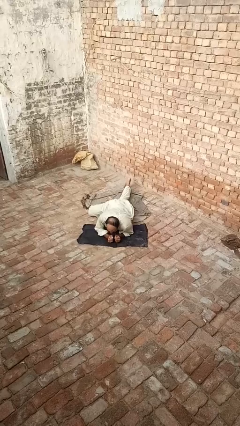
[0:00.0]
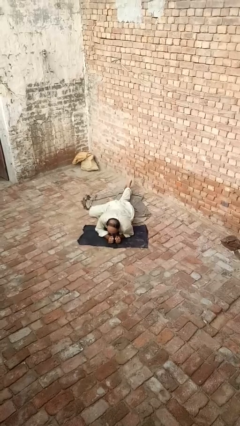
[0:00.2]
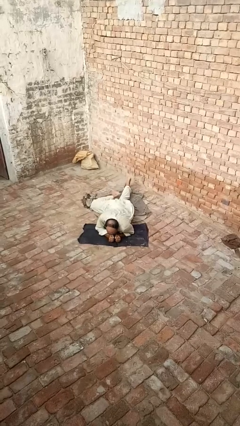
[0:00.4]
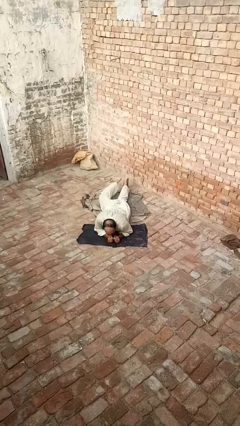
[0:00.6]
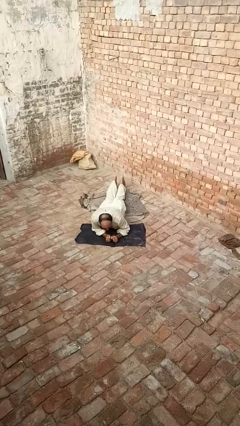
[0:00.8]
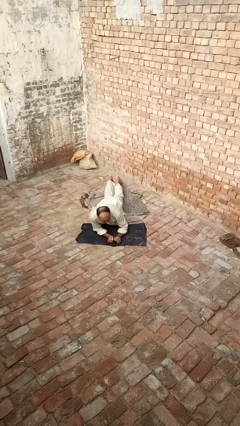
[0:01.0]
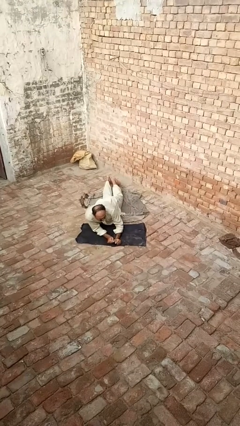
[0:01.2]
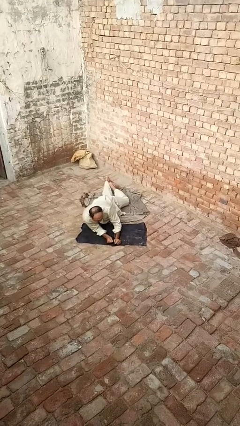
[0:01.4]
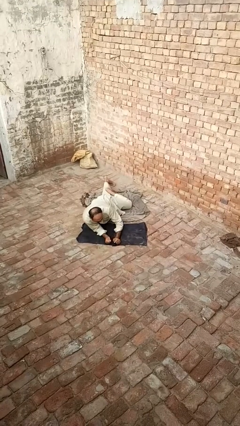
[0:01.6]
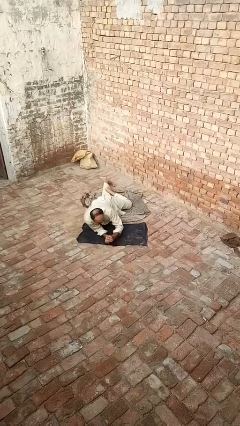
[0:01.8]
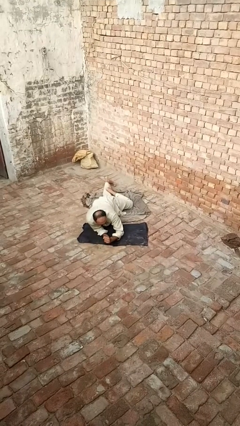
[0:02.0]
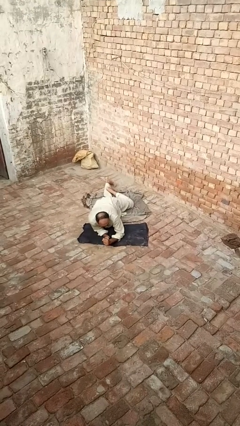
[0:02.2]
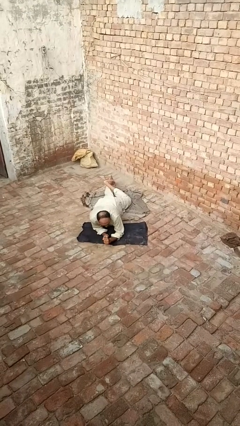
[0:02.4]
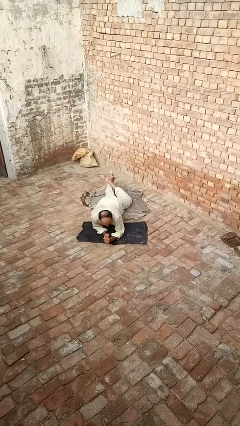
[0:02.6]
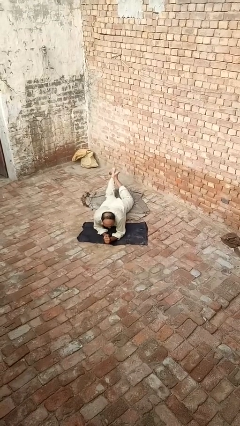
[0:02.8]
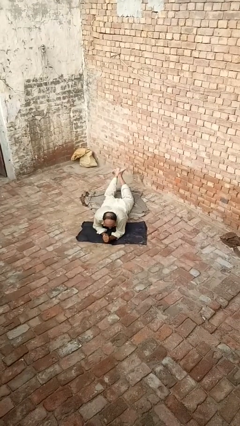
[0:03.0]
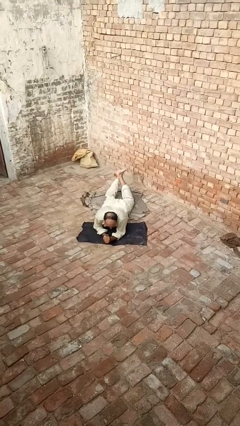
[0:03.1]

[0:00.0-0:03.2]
person crawls

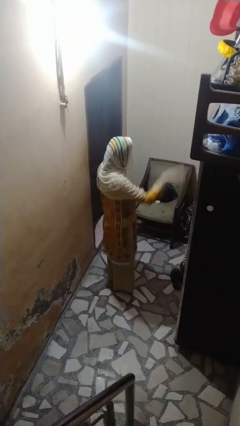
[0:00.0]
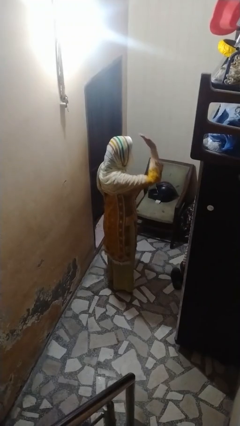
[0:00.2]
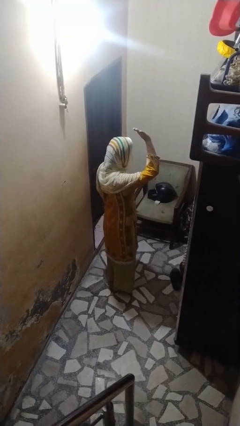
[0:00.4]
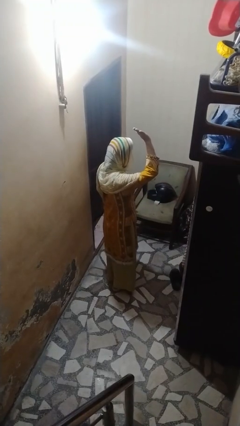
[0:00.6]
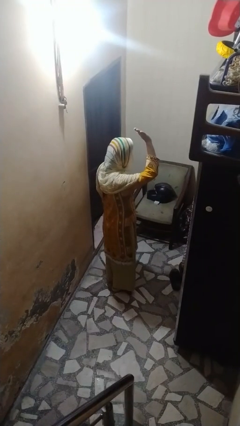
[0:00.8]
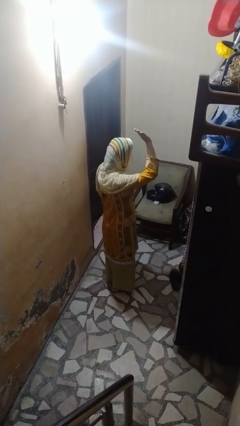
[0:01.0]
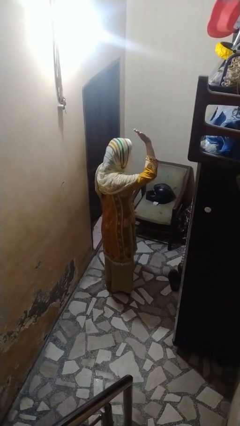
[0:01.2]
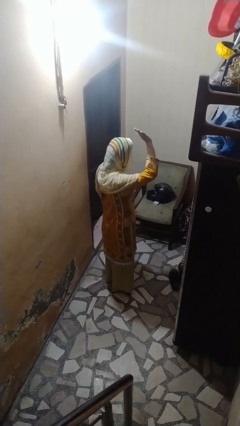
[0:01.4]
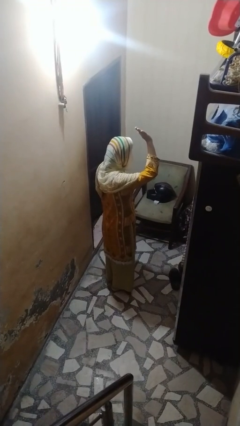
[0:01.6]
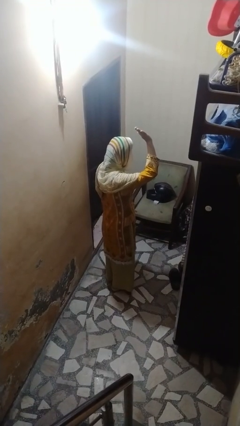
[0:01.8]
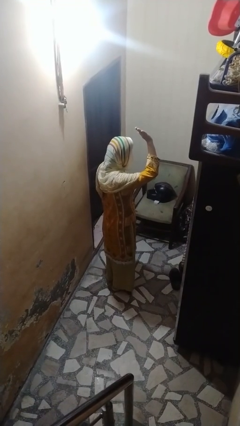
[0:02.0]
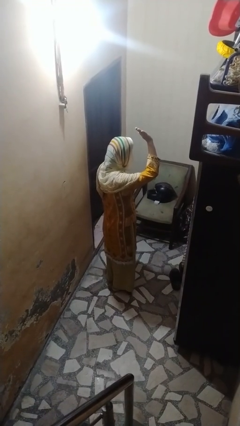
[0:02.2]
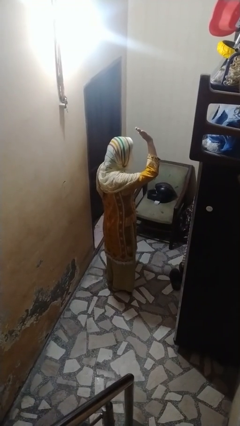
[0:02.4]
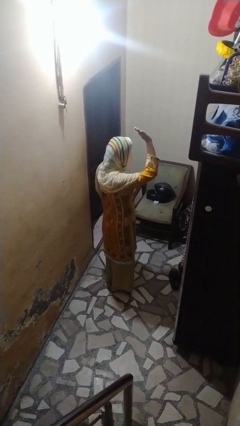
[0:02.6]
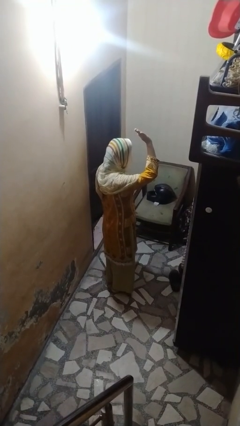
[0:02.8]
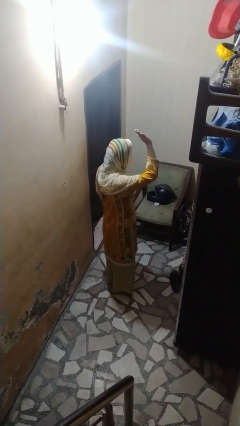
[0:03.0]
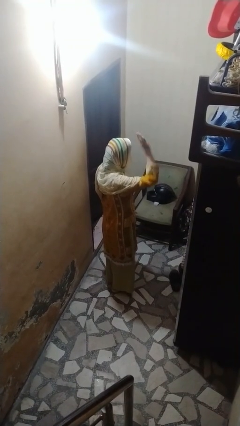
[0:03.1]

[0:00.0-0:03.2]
person gestures raise hand

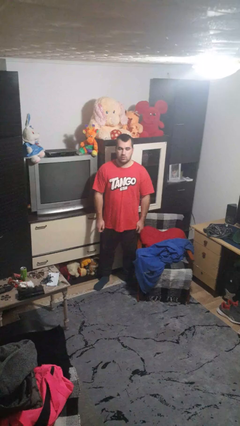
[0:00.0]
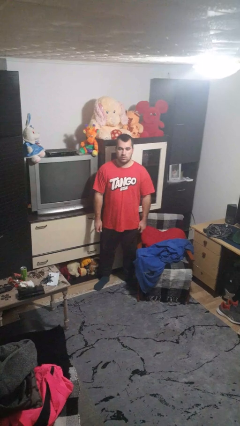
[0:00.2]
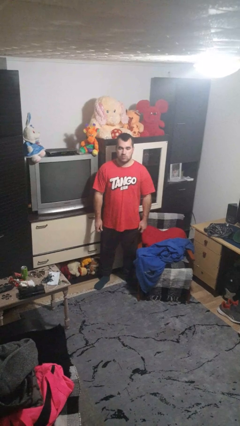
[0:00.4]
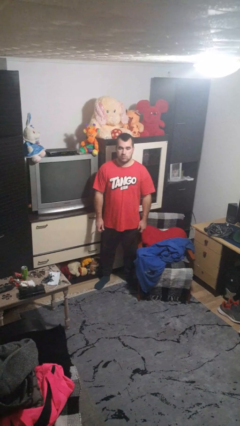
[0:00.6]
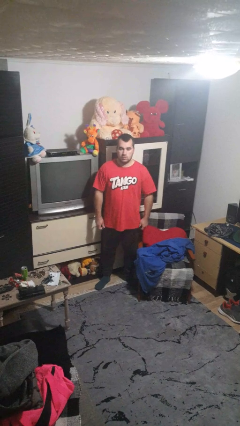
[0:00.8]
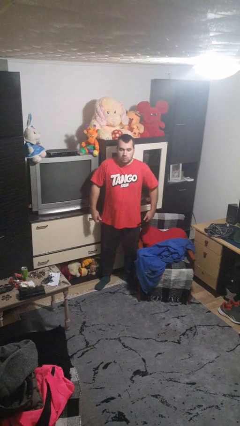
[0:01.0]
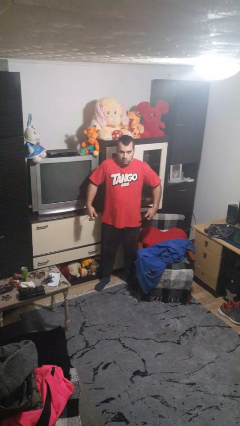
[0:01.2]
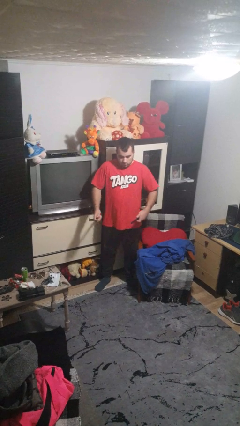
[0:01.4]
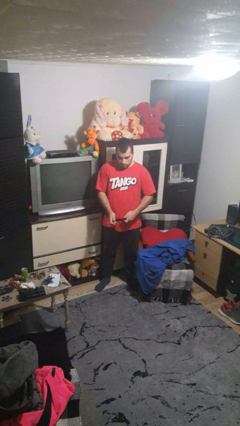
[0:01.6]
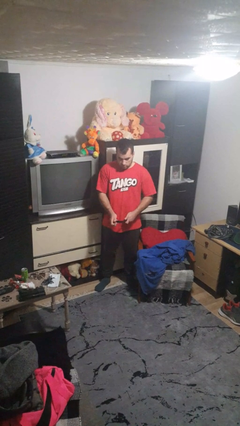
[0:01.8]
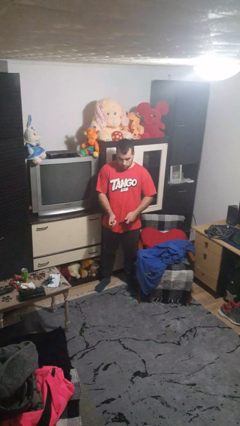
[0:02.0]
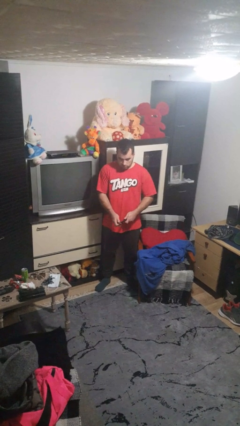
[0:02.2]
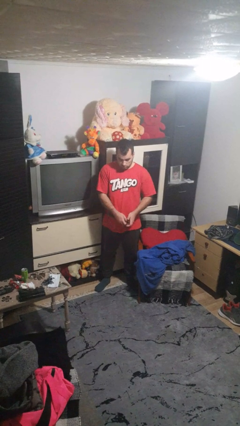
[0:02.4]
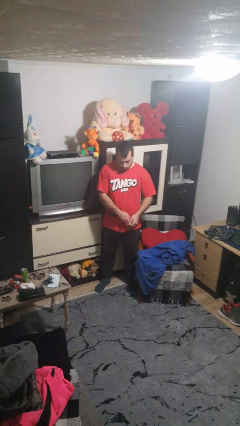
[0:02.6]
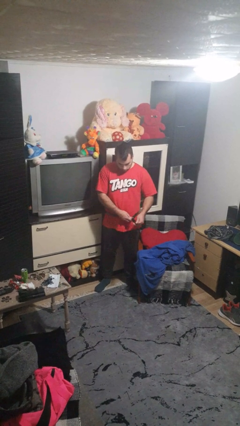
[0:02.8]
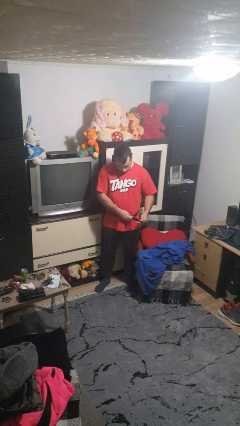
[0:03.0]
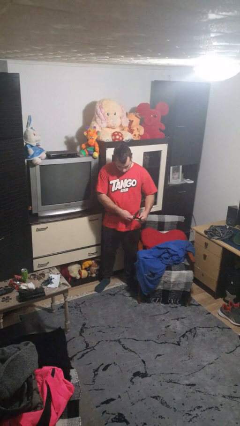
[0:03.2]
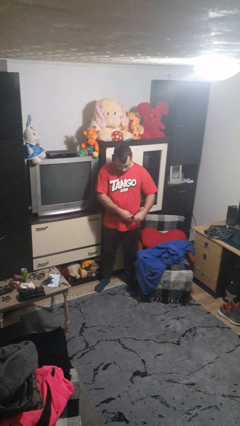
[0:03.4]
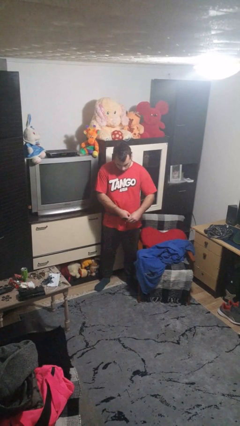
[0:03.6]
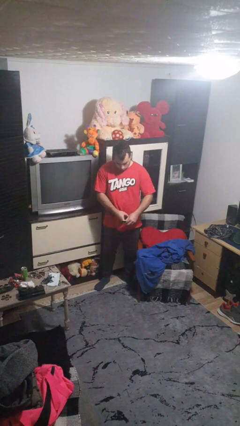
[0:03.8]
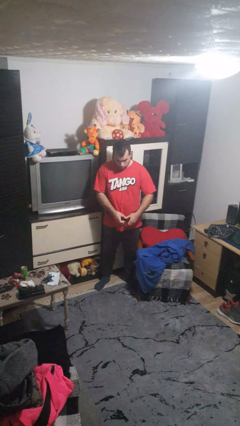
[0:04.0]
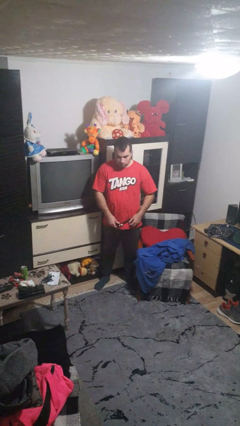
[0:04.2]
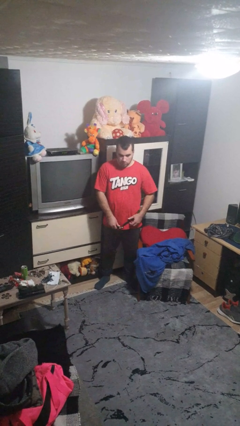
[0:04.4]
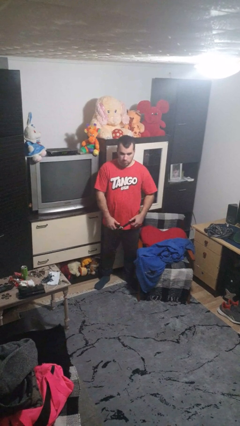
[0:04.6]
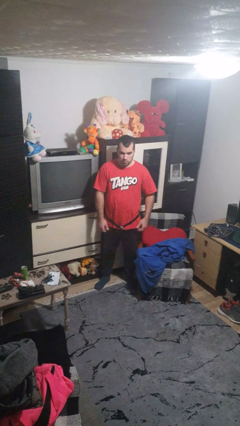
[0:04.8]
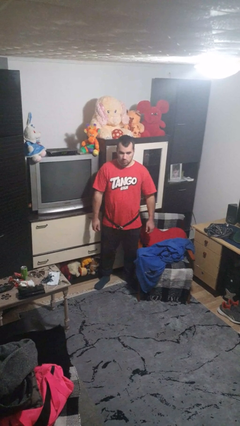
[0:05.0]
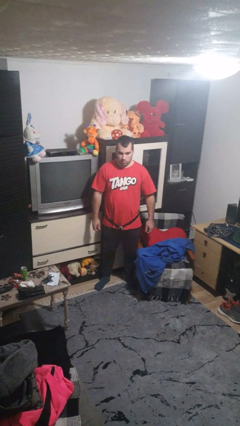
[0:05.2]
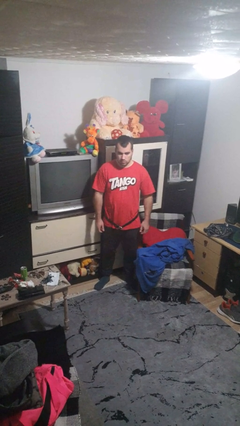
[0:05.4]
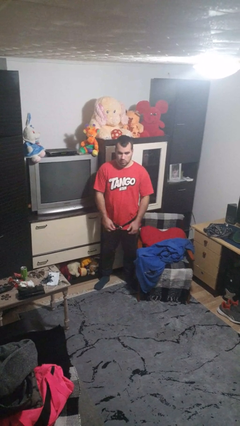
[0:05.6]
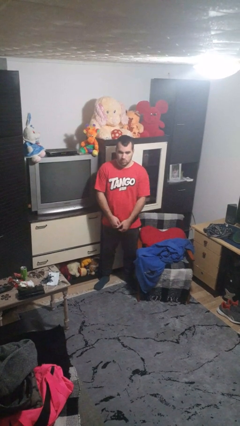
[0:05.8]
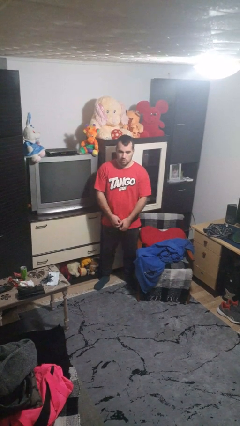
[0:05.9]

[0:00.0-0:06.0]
person puts on belt

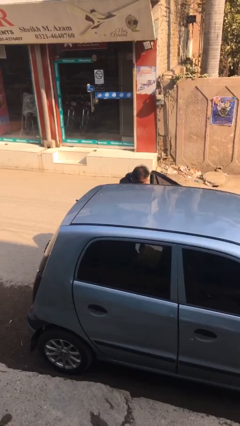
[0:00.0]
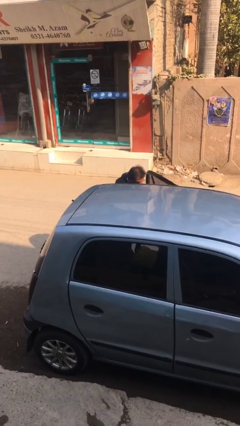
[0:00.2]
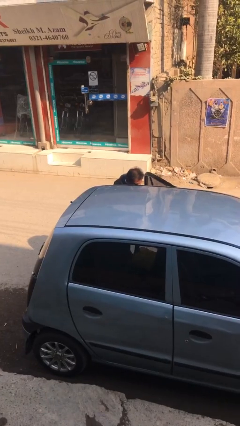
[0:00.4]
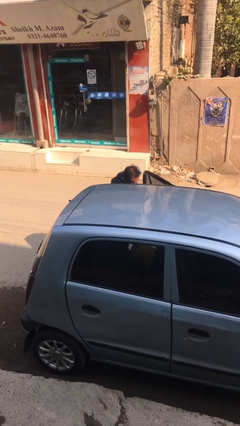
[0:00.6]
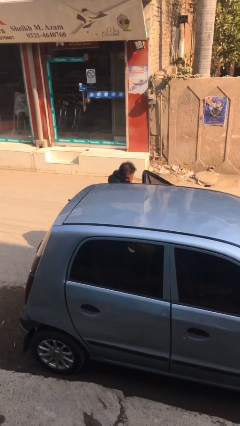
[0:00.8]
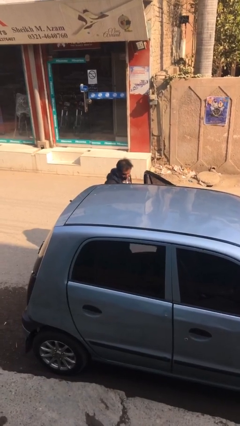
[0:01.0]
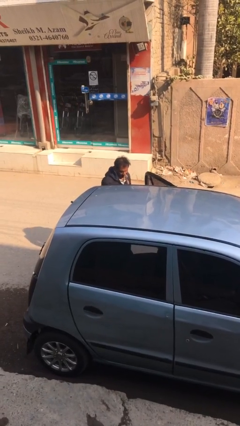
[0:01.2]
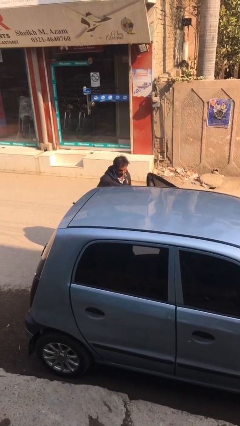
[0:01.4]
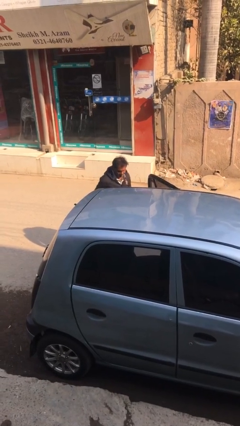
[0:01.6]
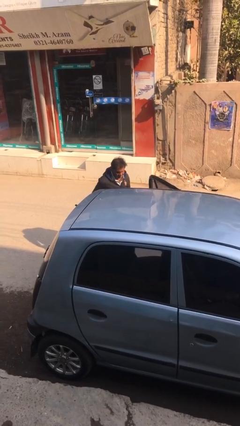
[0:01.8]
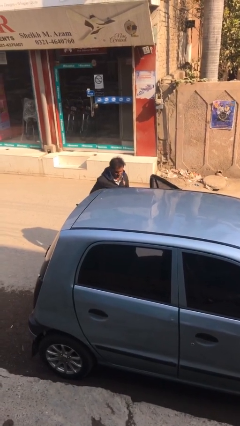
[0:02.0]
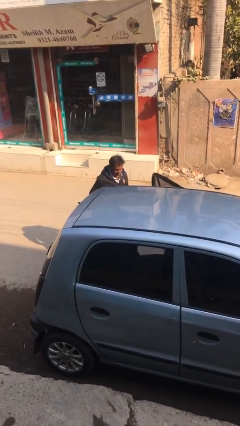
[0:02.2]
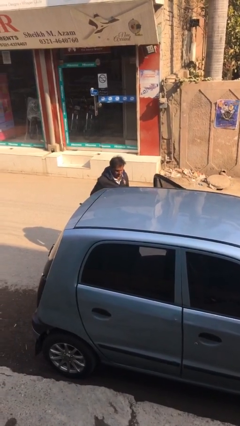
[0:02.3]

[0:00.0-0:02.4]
person unloads car

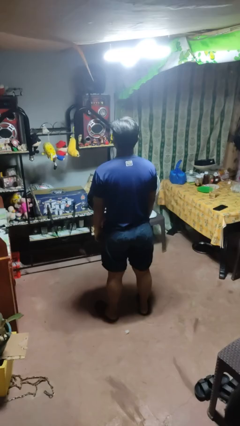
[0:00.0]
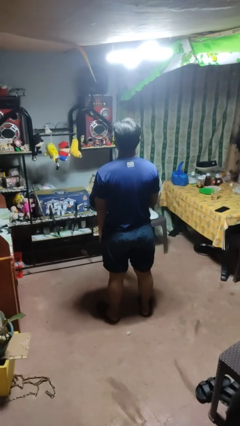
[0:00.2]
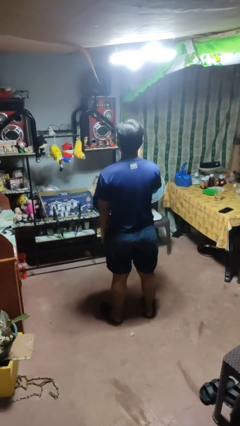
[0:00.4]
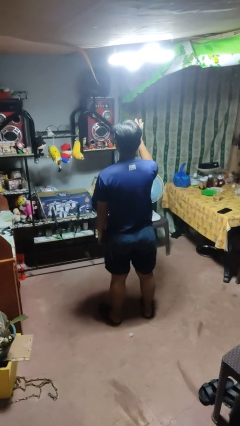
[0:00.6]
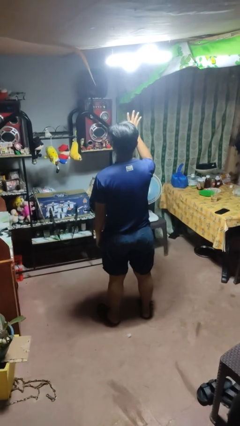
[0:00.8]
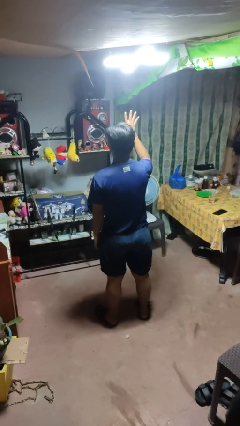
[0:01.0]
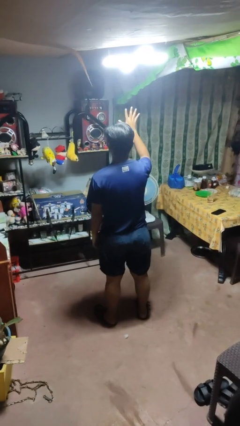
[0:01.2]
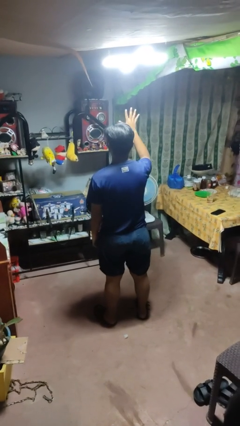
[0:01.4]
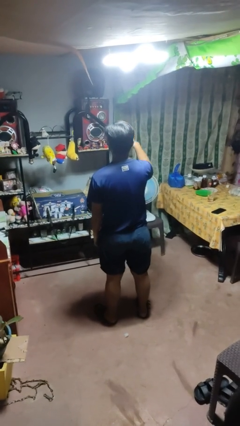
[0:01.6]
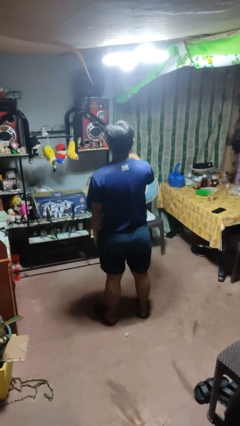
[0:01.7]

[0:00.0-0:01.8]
person gestures number five

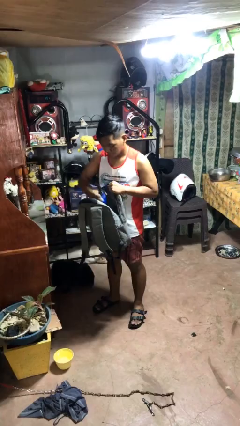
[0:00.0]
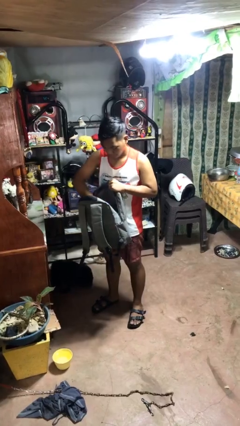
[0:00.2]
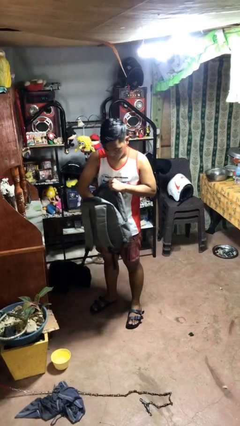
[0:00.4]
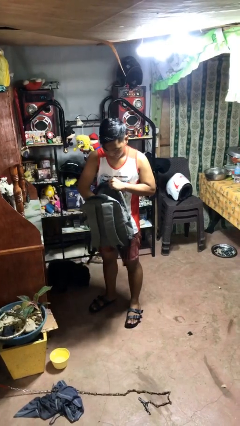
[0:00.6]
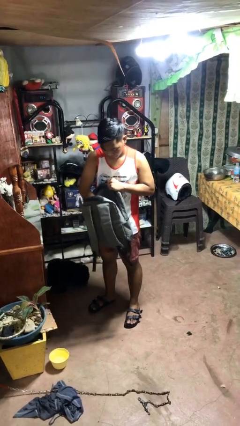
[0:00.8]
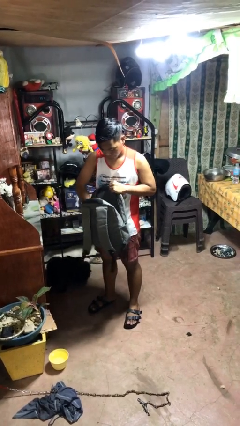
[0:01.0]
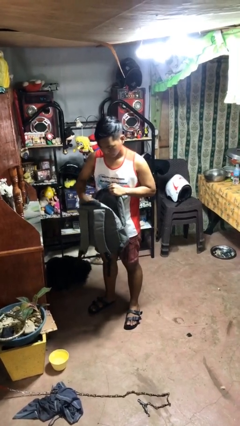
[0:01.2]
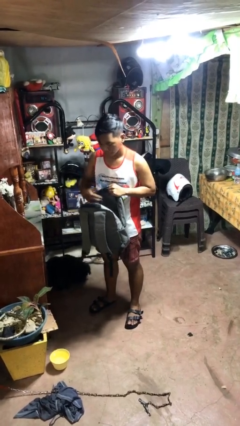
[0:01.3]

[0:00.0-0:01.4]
person puts object into bag
